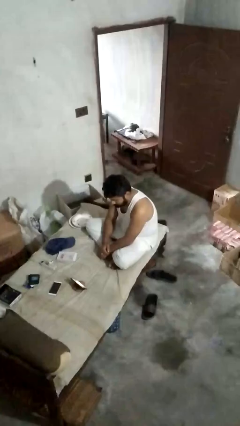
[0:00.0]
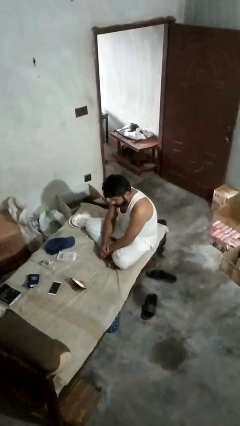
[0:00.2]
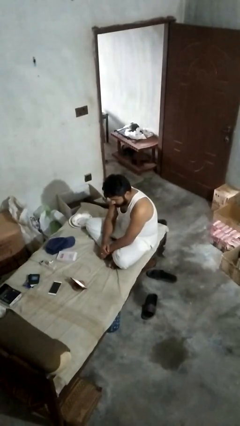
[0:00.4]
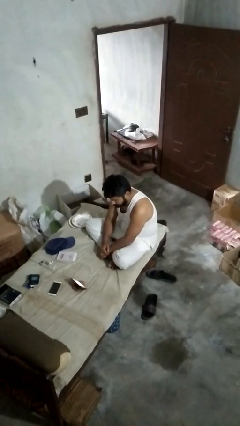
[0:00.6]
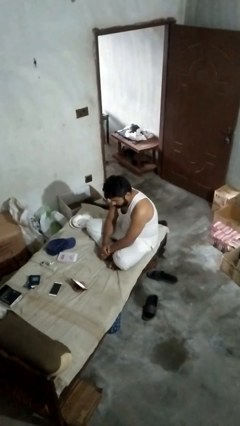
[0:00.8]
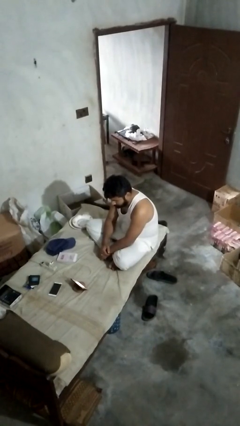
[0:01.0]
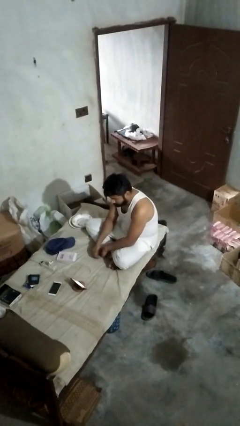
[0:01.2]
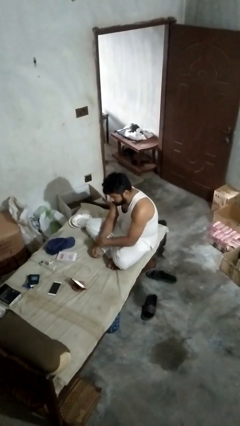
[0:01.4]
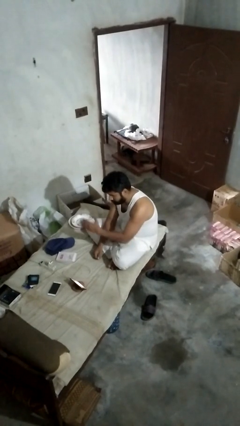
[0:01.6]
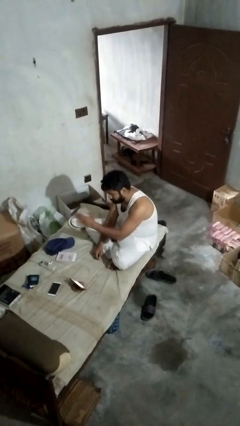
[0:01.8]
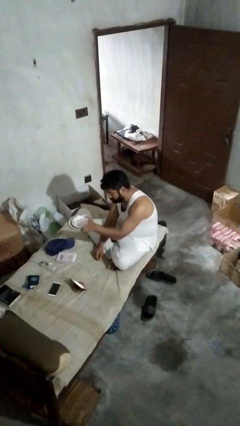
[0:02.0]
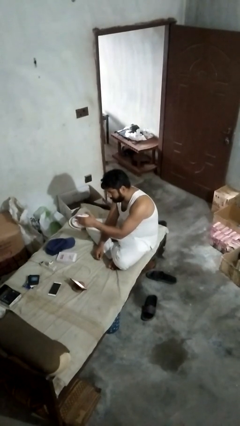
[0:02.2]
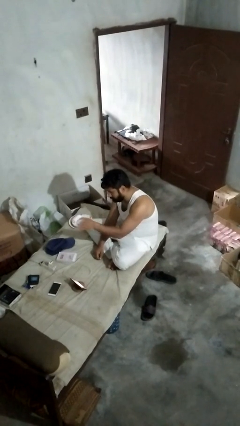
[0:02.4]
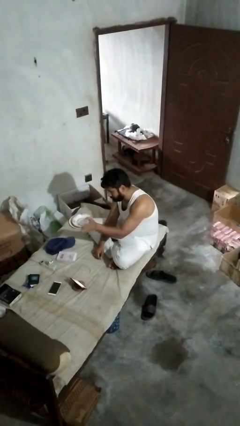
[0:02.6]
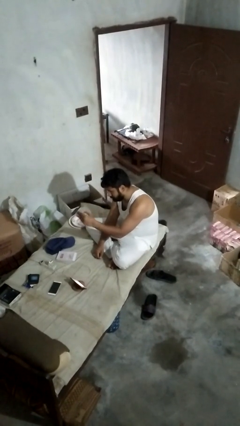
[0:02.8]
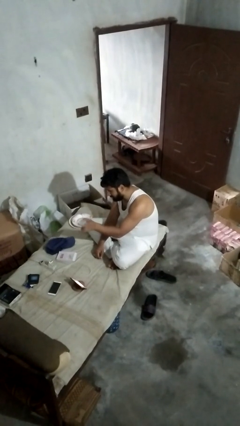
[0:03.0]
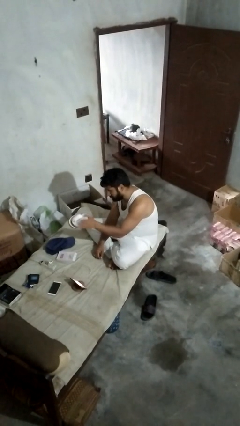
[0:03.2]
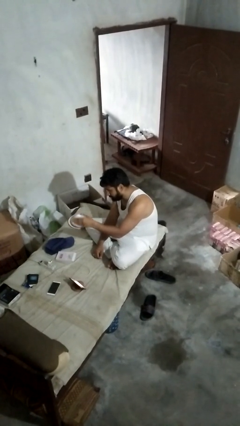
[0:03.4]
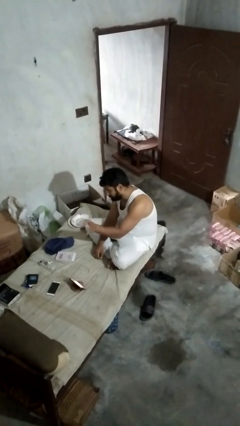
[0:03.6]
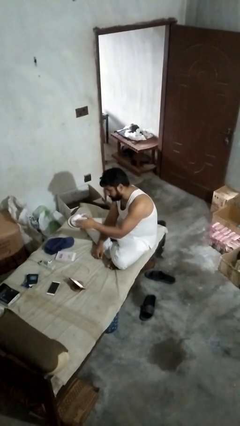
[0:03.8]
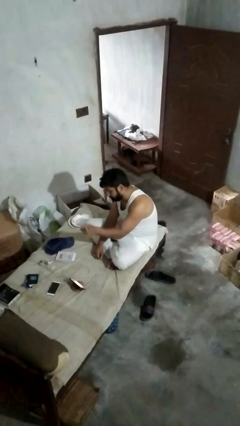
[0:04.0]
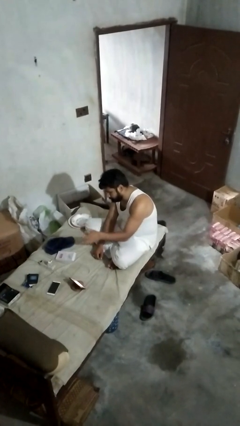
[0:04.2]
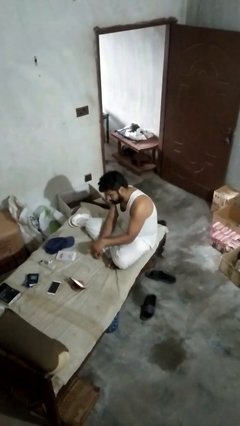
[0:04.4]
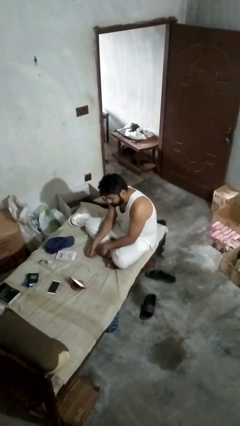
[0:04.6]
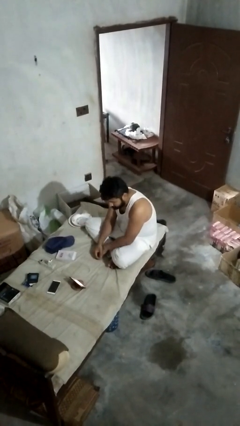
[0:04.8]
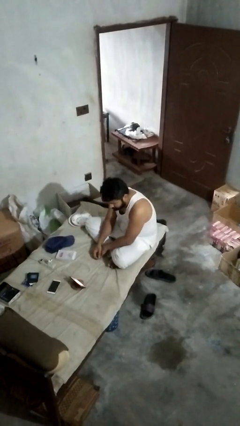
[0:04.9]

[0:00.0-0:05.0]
person gestures swipe left

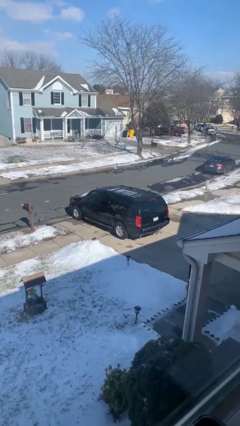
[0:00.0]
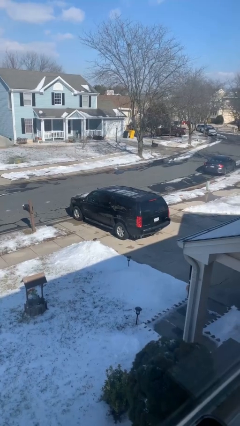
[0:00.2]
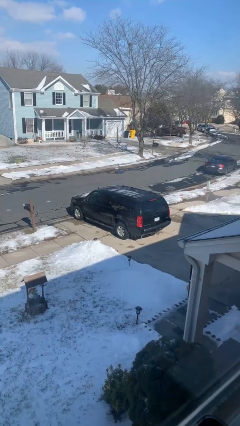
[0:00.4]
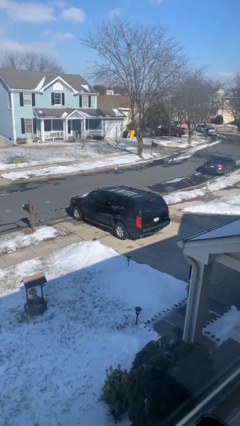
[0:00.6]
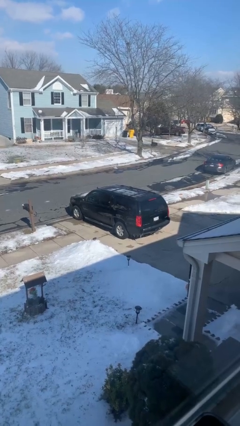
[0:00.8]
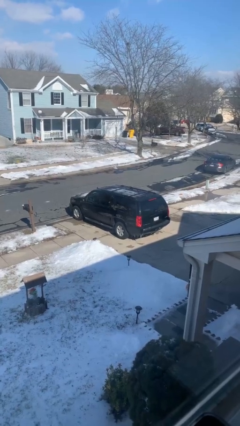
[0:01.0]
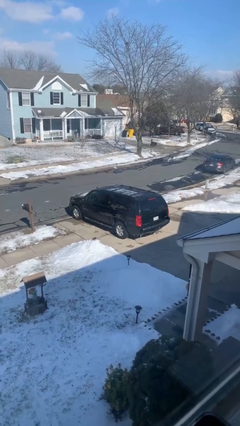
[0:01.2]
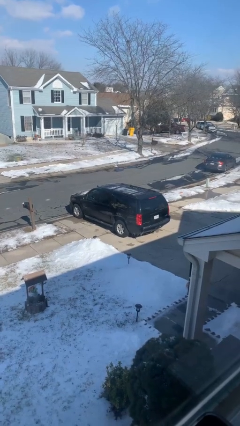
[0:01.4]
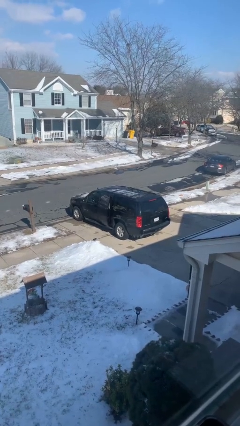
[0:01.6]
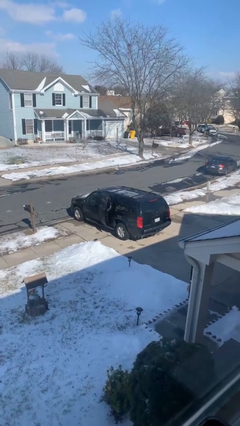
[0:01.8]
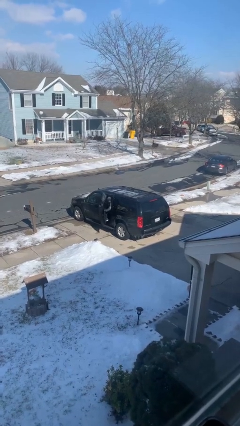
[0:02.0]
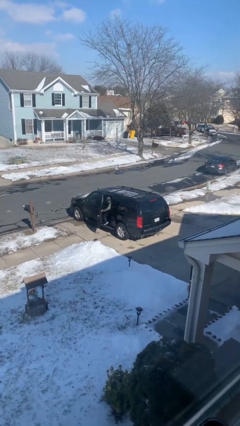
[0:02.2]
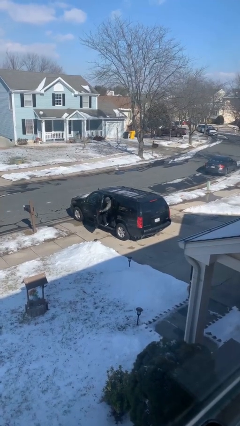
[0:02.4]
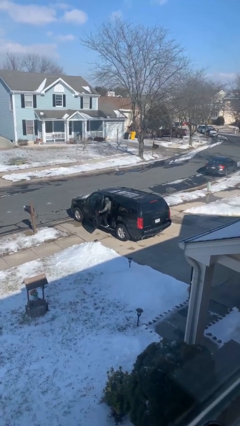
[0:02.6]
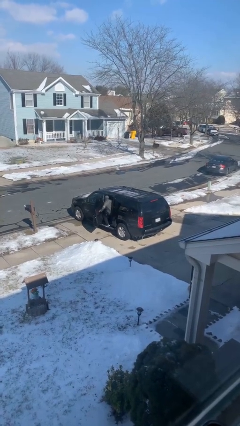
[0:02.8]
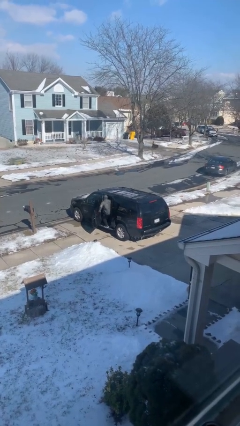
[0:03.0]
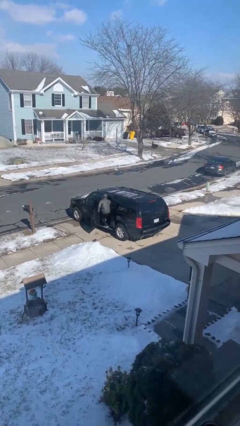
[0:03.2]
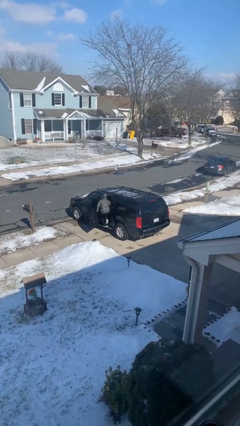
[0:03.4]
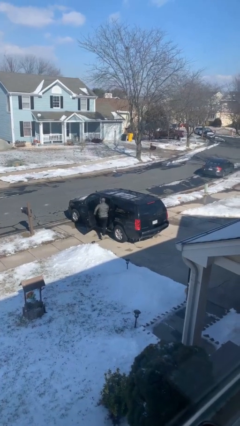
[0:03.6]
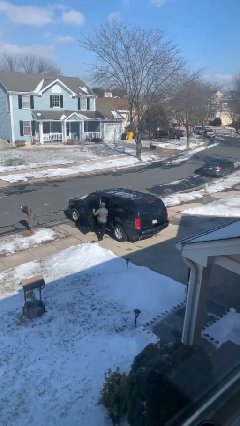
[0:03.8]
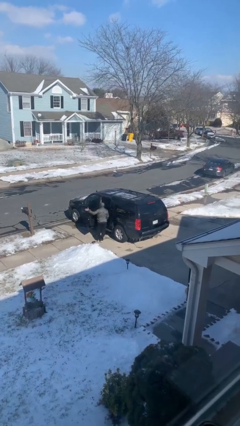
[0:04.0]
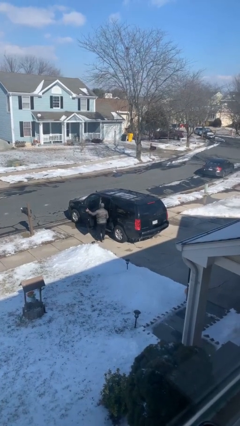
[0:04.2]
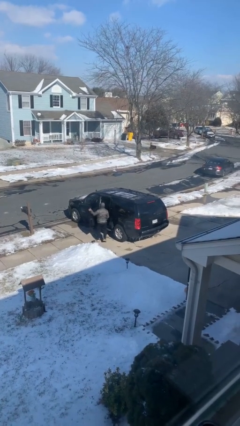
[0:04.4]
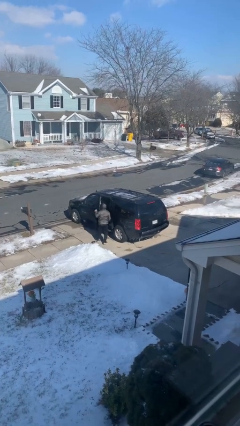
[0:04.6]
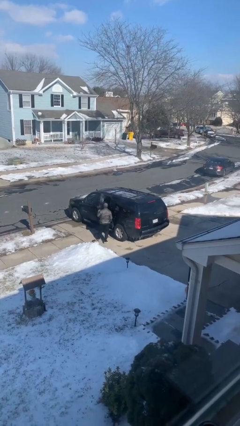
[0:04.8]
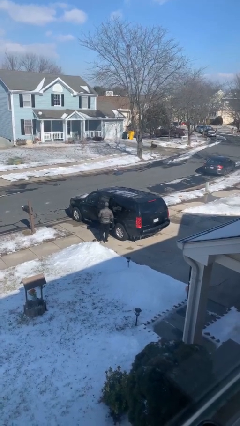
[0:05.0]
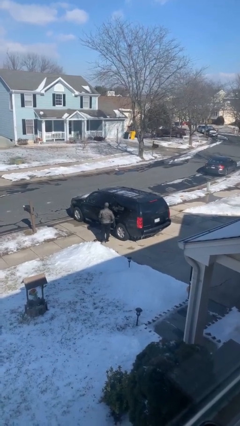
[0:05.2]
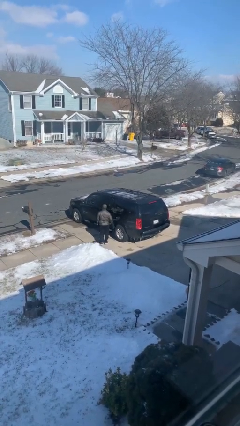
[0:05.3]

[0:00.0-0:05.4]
car drops off person

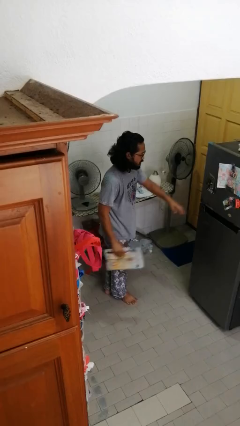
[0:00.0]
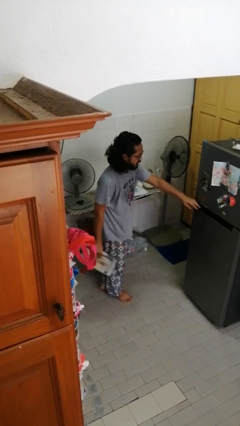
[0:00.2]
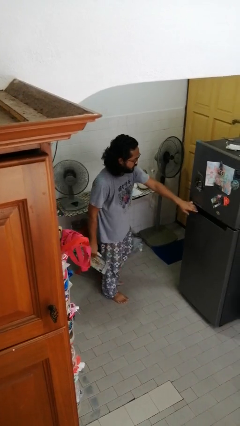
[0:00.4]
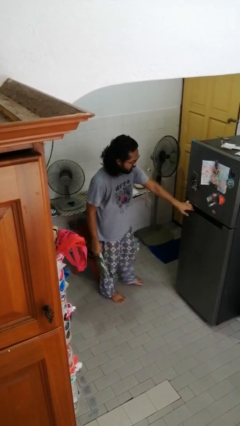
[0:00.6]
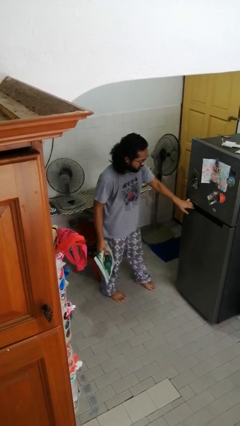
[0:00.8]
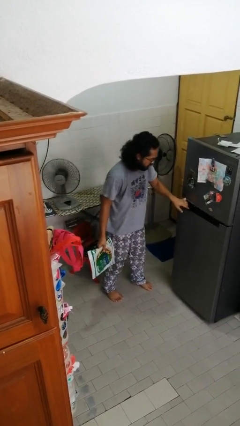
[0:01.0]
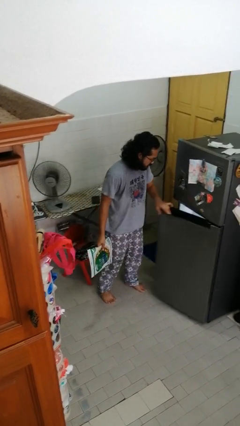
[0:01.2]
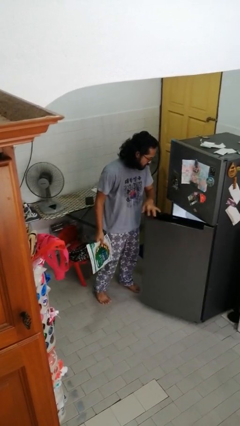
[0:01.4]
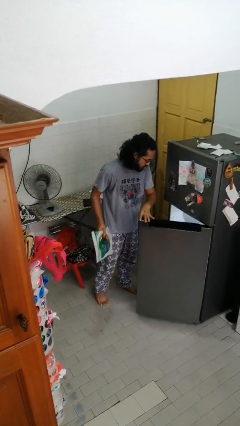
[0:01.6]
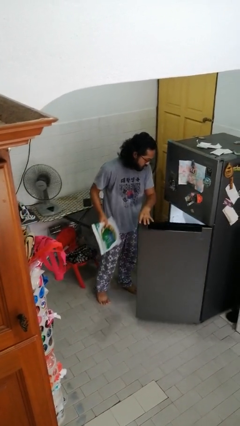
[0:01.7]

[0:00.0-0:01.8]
person opens refrigerator

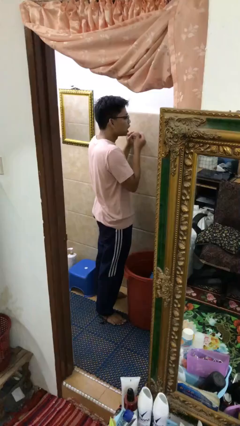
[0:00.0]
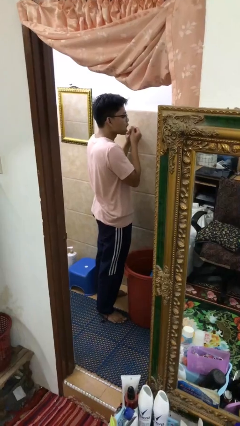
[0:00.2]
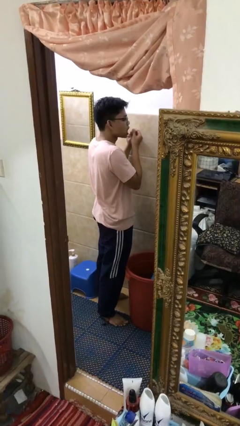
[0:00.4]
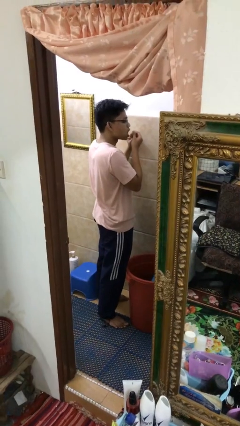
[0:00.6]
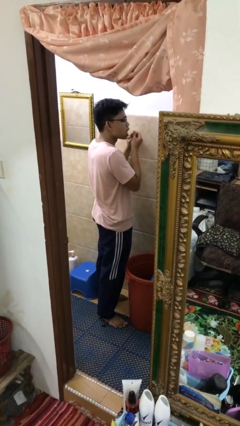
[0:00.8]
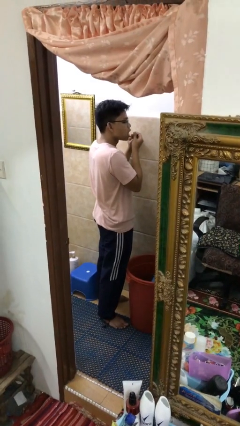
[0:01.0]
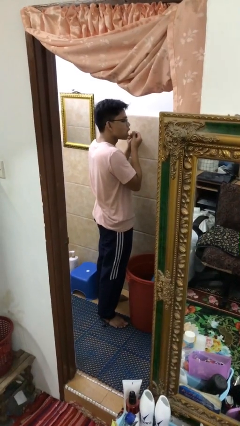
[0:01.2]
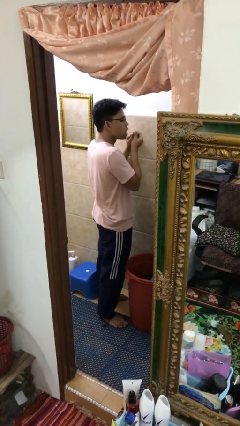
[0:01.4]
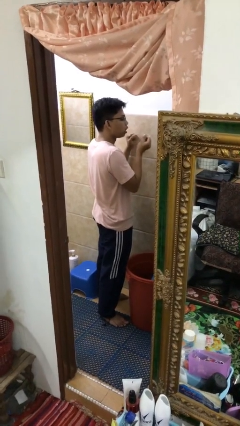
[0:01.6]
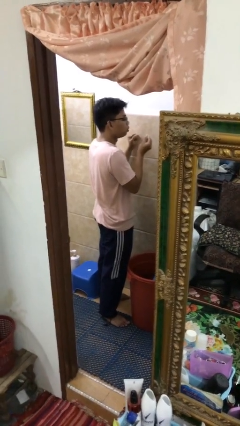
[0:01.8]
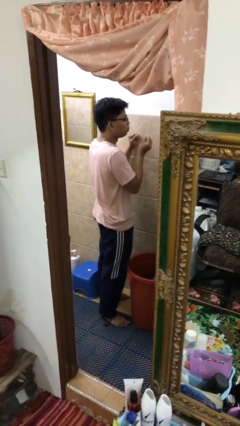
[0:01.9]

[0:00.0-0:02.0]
person flosses

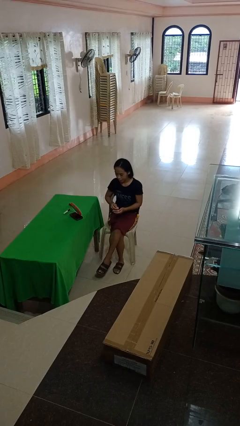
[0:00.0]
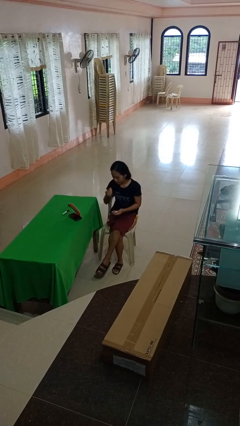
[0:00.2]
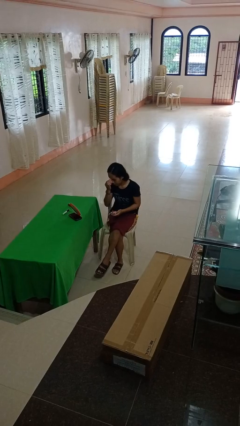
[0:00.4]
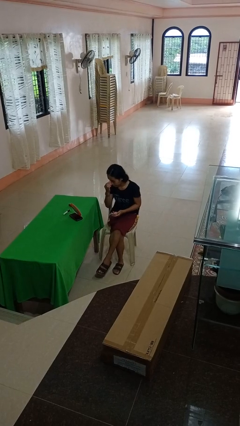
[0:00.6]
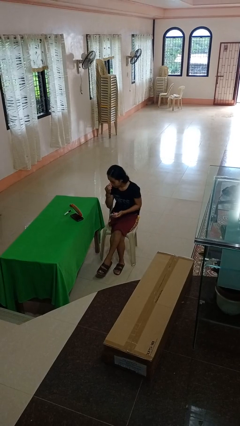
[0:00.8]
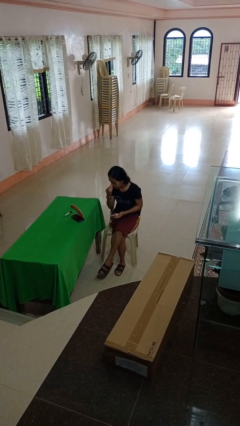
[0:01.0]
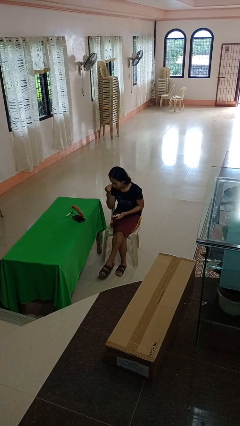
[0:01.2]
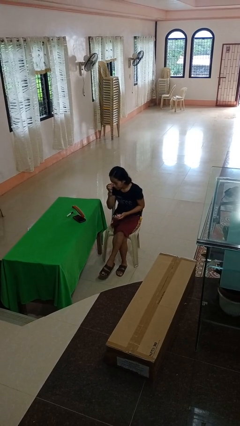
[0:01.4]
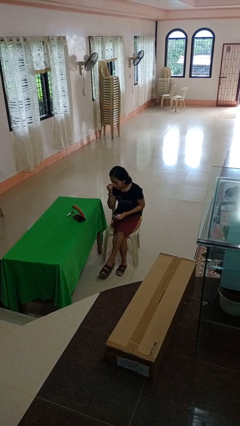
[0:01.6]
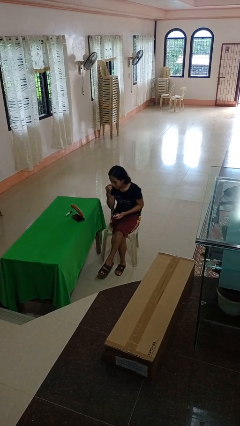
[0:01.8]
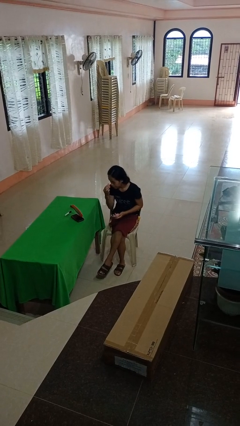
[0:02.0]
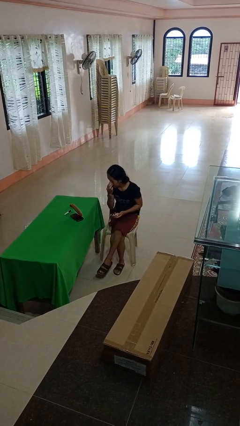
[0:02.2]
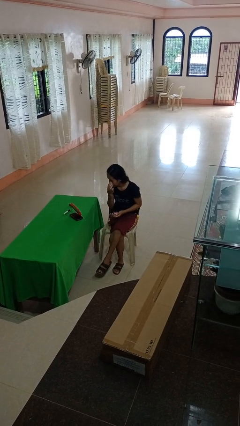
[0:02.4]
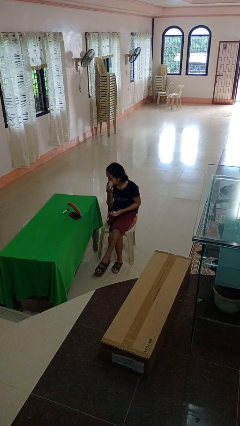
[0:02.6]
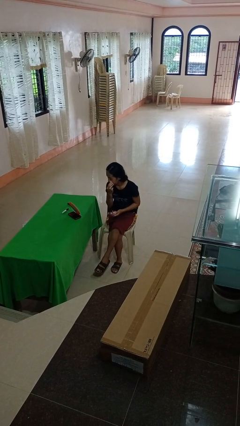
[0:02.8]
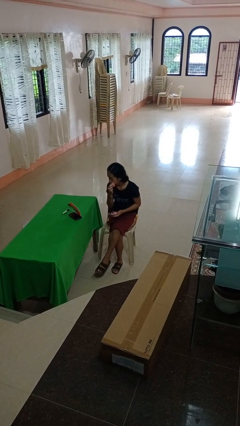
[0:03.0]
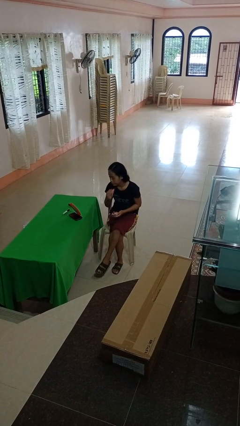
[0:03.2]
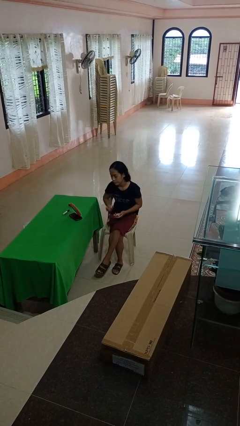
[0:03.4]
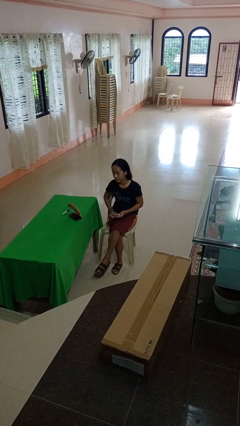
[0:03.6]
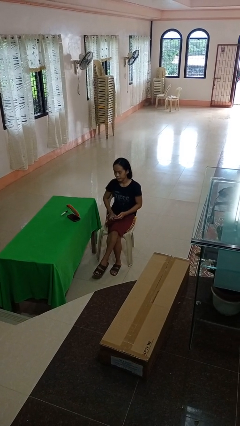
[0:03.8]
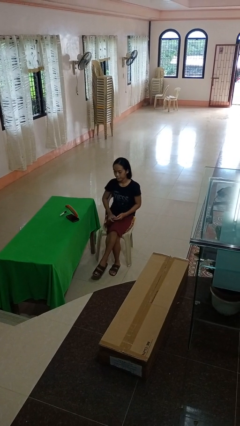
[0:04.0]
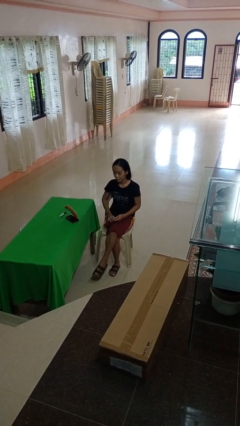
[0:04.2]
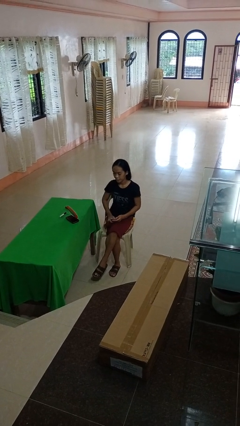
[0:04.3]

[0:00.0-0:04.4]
person applies foundation makeup
